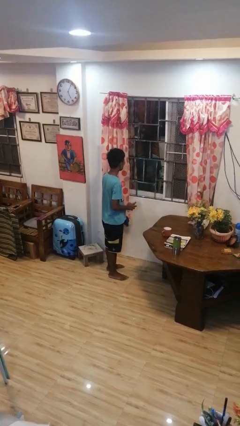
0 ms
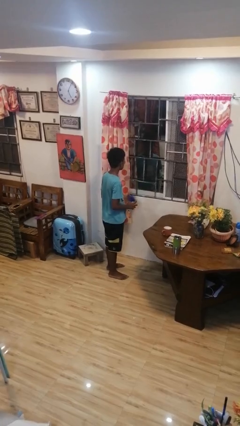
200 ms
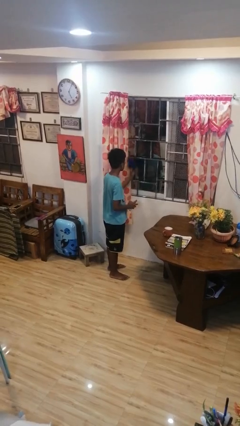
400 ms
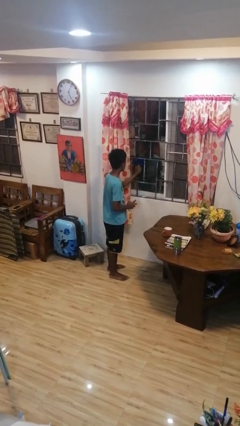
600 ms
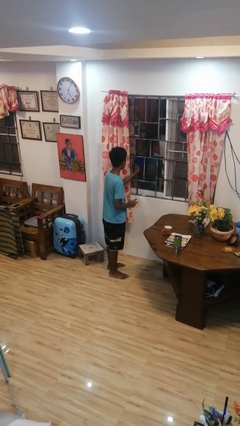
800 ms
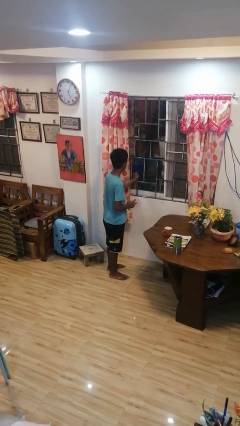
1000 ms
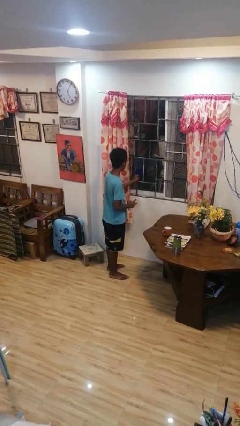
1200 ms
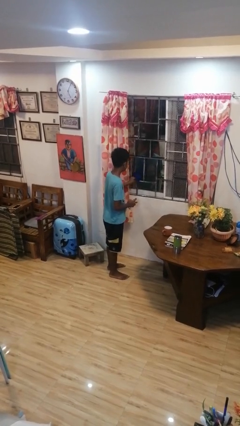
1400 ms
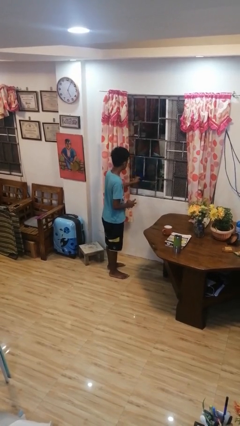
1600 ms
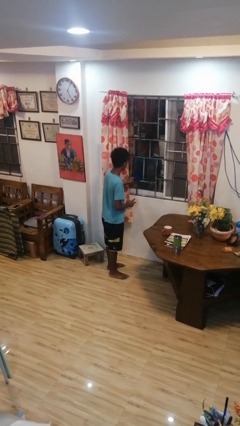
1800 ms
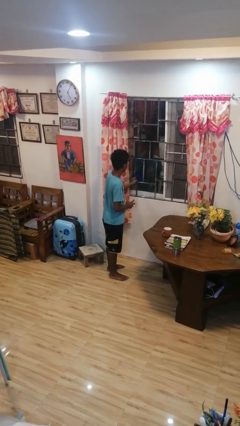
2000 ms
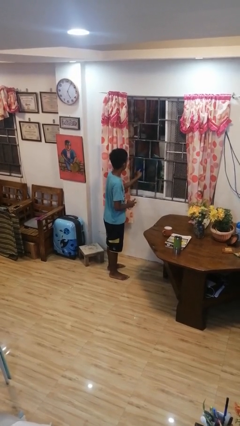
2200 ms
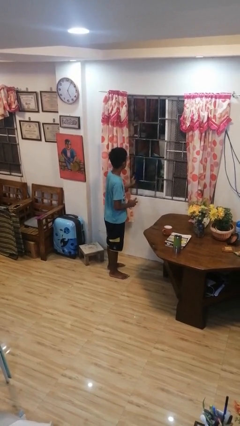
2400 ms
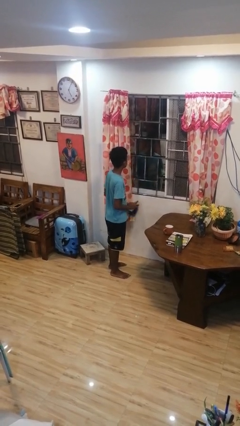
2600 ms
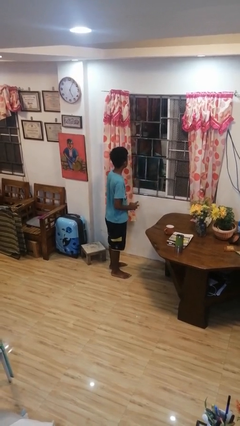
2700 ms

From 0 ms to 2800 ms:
person washes window

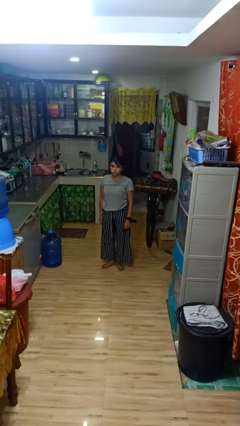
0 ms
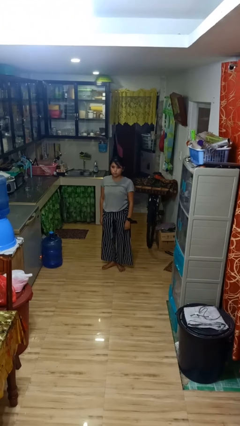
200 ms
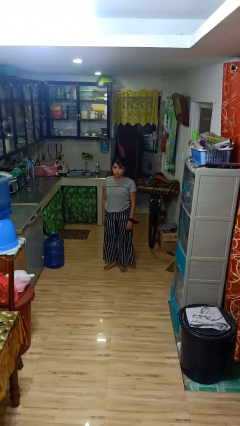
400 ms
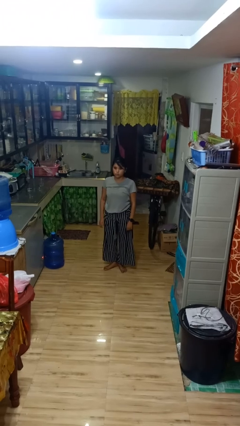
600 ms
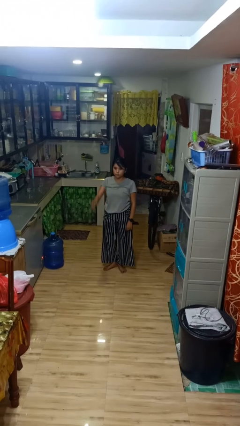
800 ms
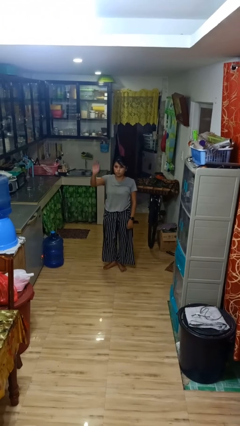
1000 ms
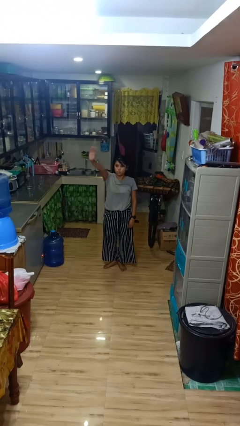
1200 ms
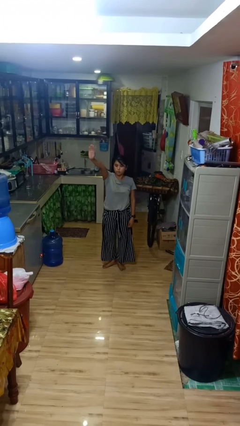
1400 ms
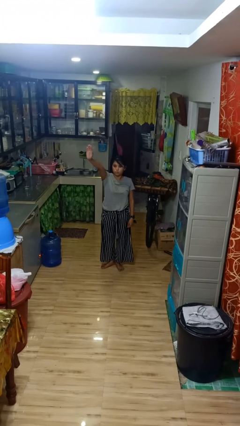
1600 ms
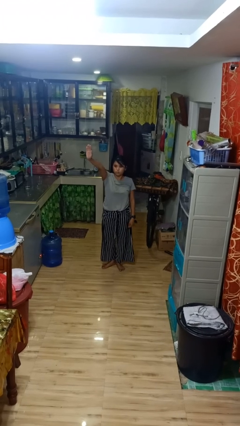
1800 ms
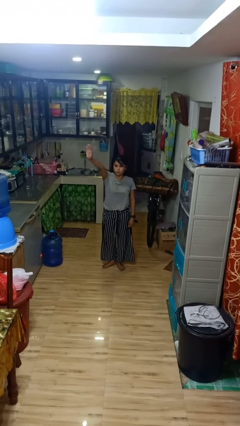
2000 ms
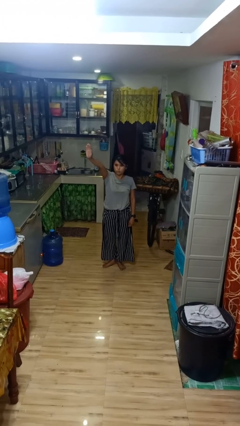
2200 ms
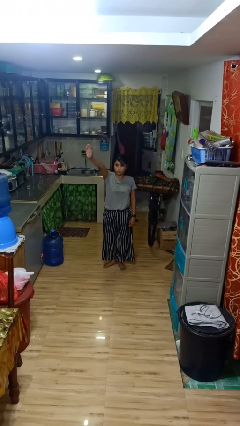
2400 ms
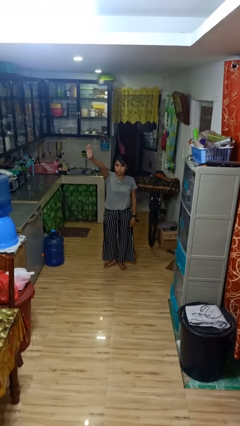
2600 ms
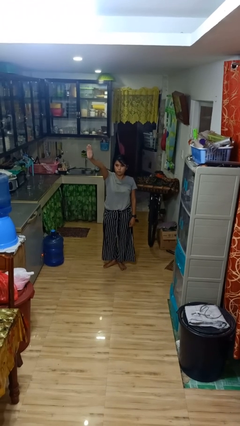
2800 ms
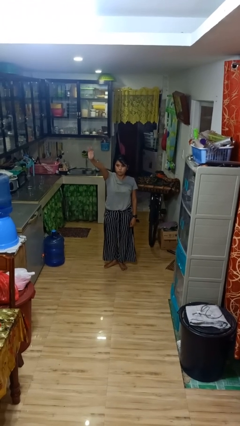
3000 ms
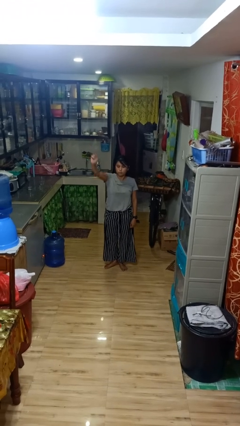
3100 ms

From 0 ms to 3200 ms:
person gestures stop

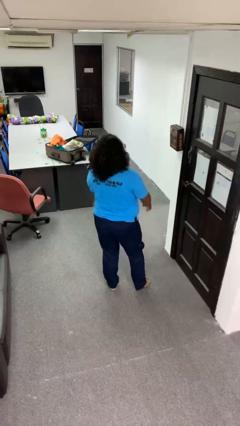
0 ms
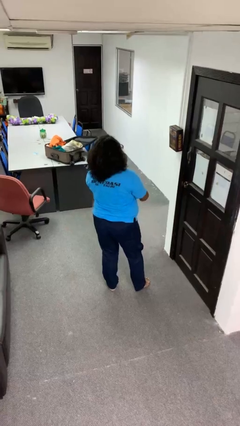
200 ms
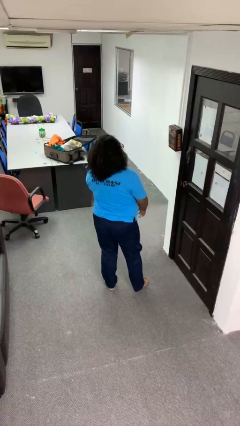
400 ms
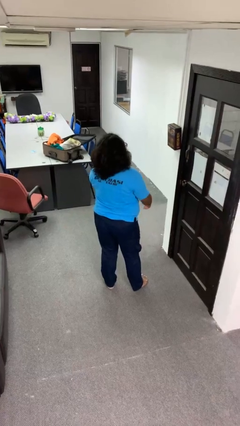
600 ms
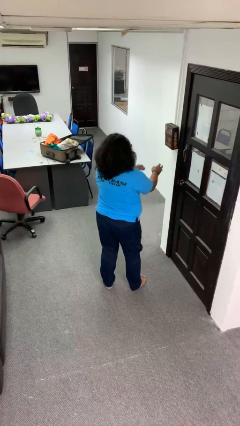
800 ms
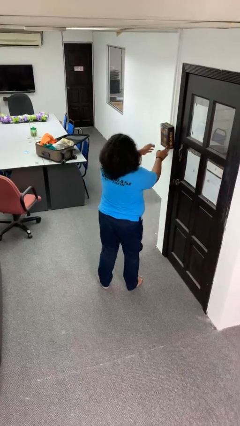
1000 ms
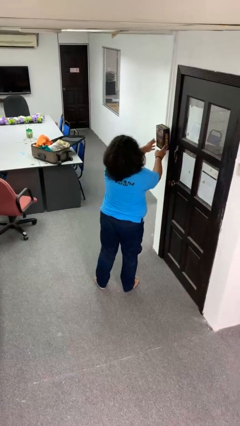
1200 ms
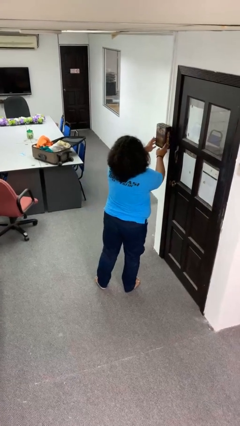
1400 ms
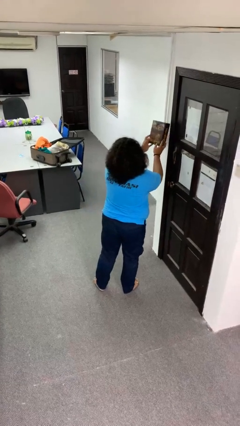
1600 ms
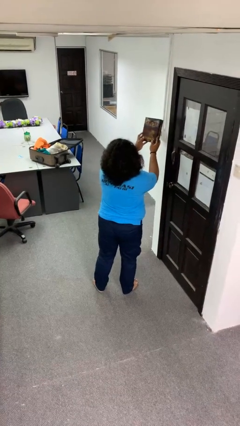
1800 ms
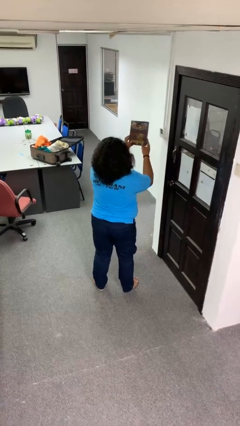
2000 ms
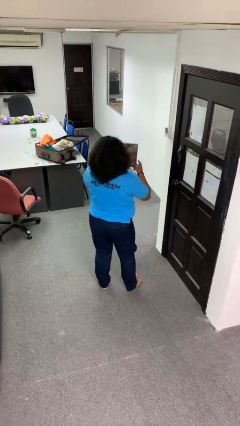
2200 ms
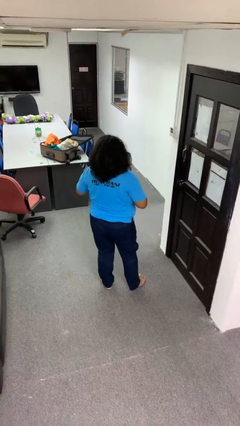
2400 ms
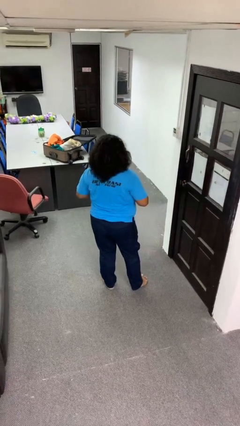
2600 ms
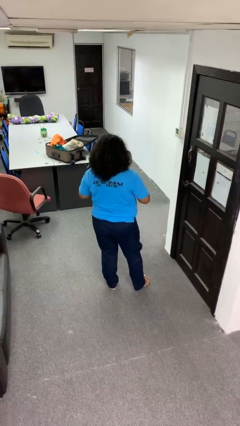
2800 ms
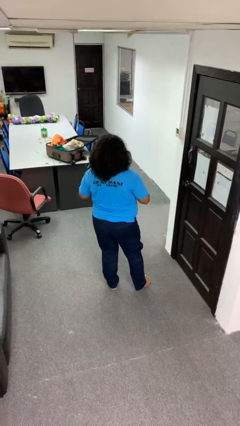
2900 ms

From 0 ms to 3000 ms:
person takes down picture frame

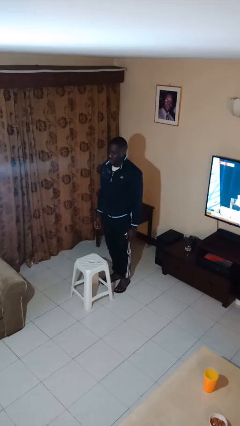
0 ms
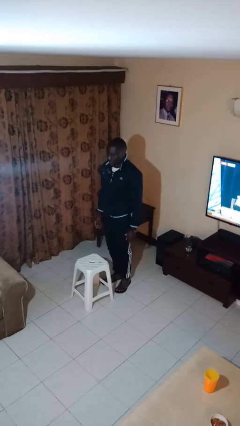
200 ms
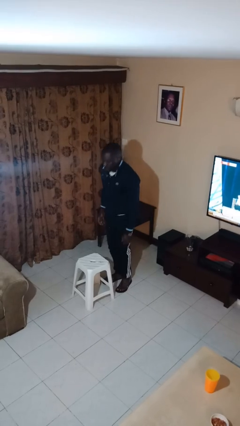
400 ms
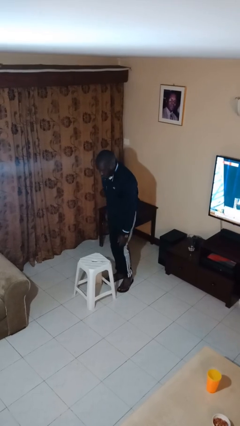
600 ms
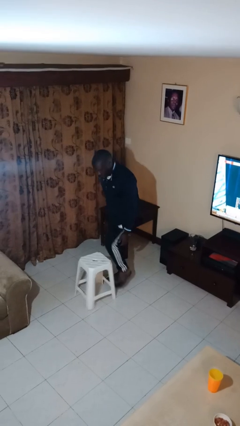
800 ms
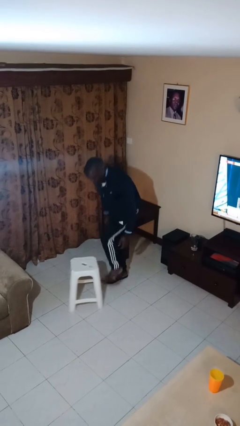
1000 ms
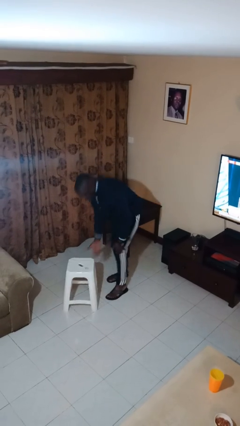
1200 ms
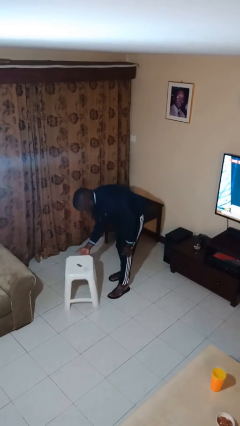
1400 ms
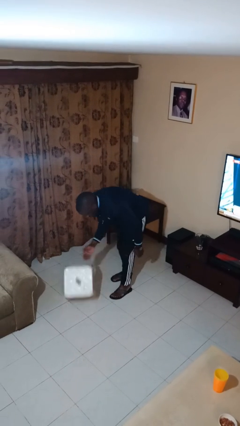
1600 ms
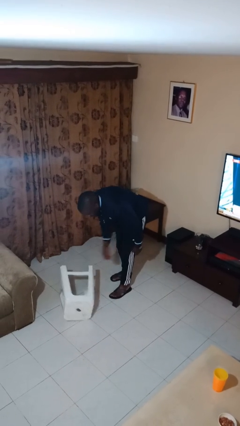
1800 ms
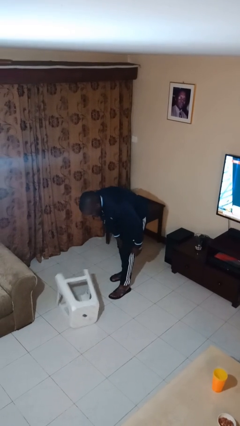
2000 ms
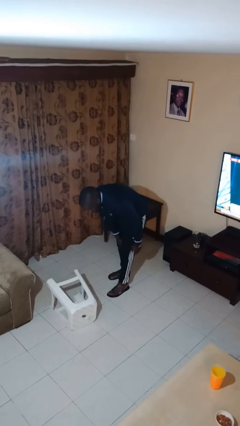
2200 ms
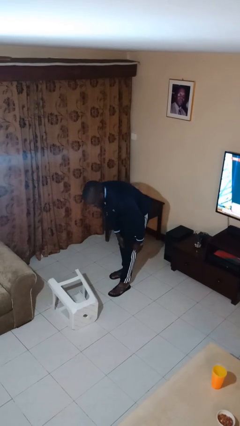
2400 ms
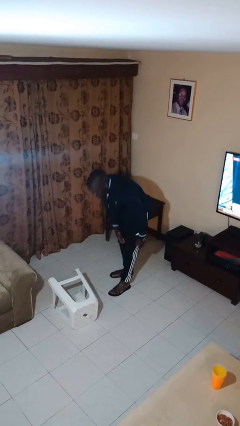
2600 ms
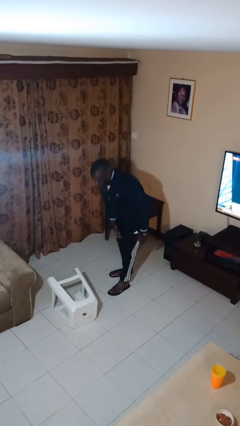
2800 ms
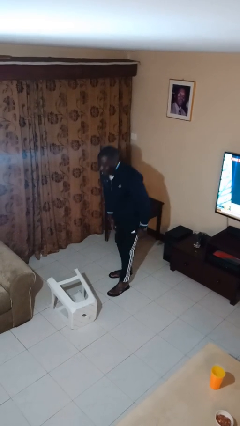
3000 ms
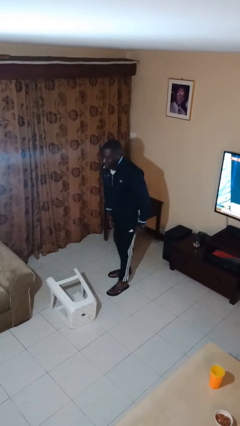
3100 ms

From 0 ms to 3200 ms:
person knocks over furniture

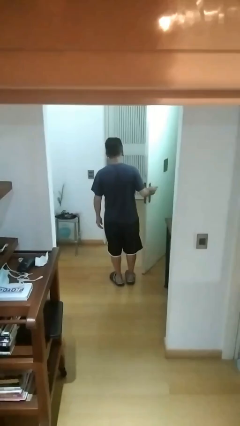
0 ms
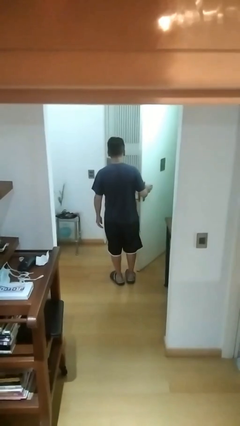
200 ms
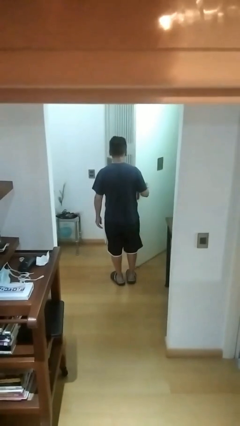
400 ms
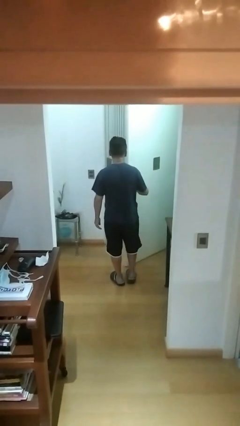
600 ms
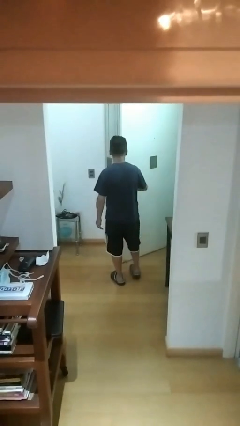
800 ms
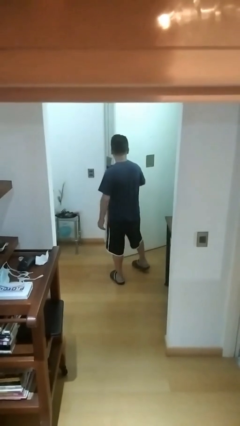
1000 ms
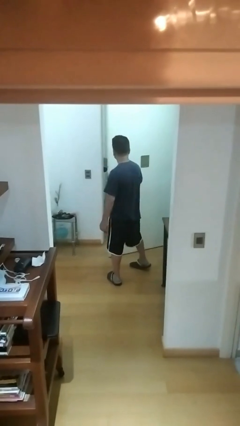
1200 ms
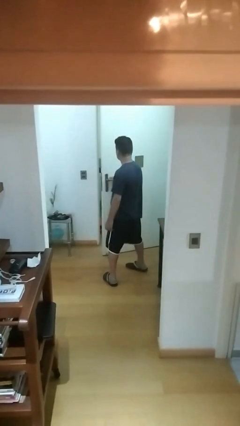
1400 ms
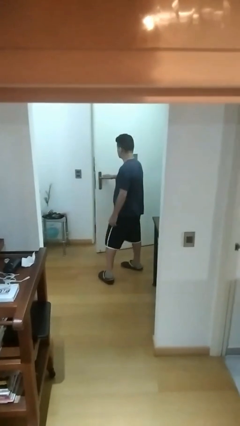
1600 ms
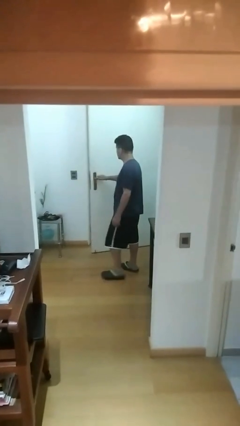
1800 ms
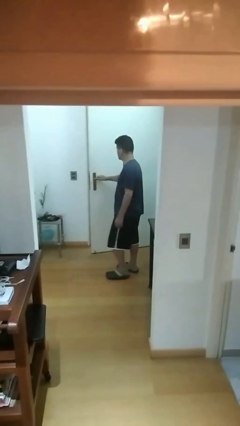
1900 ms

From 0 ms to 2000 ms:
person closes facility door

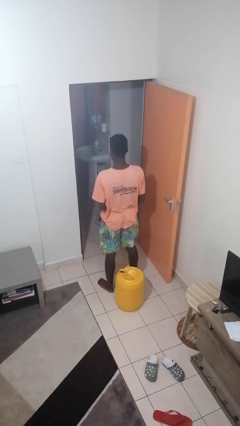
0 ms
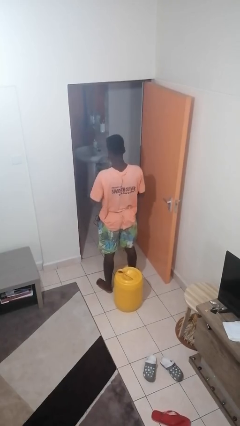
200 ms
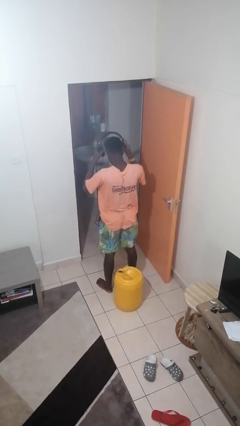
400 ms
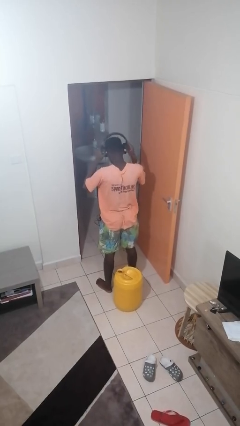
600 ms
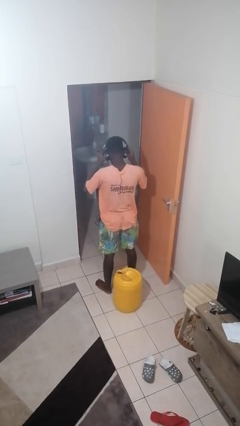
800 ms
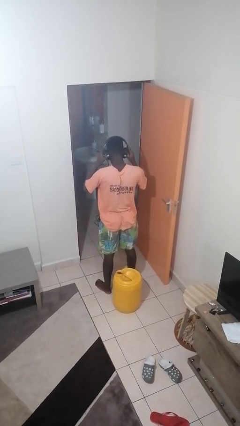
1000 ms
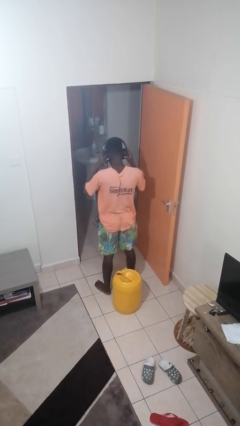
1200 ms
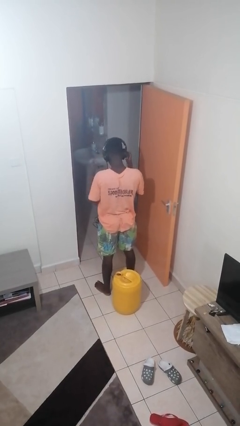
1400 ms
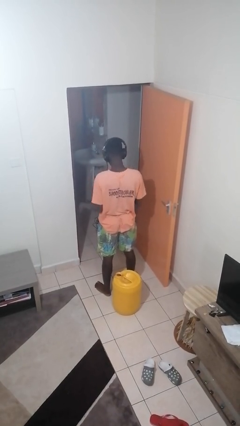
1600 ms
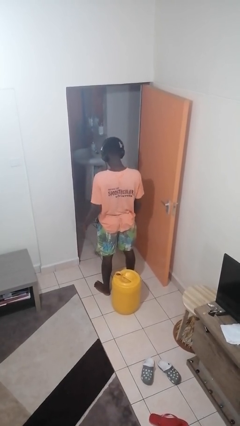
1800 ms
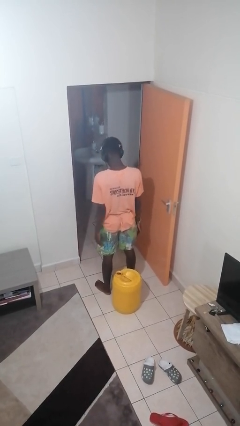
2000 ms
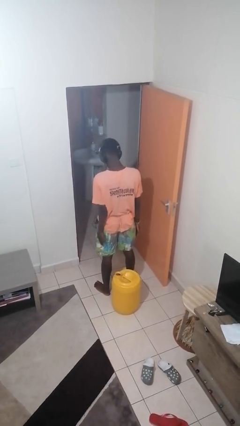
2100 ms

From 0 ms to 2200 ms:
person puts on headphones

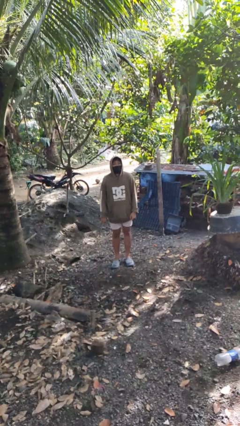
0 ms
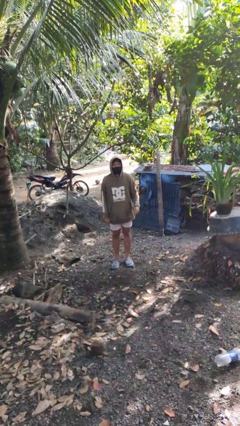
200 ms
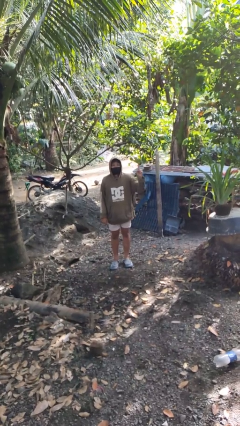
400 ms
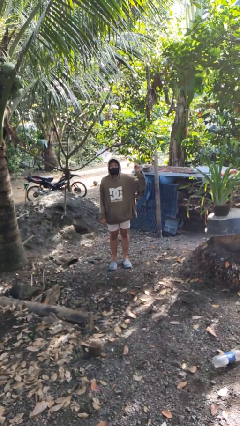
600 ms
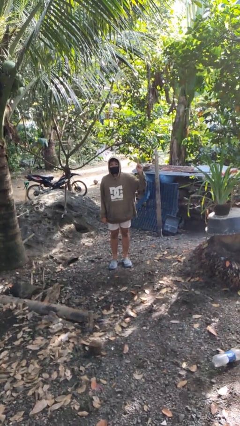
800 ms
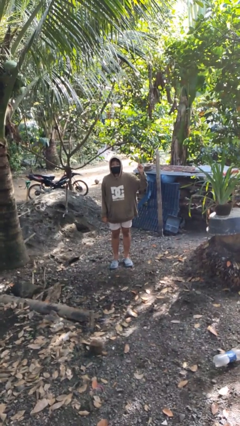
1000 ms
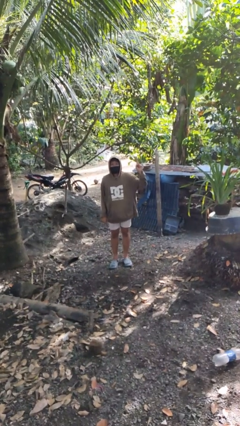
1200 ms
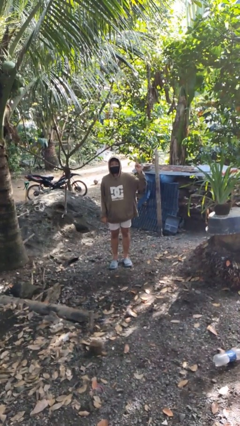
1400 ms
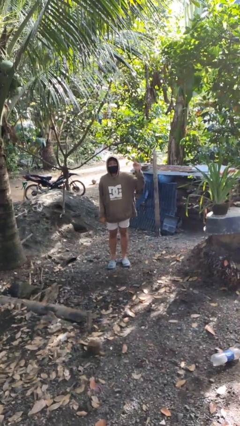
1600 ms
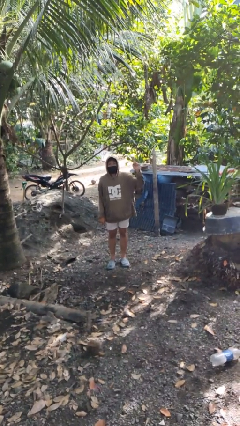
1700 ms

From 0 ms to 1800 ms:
person gestures number one
